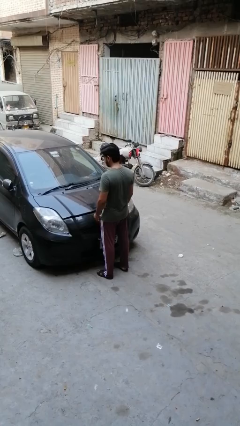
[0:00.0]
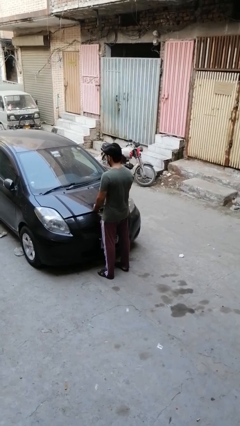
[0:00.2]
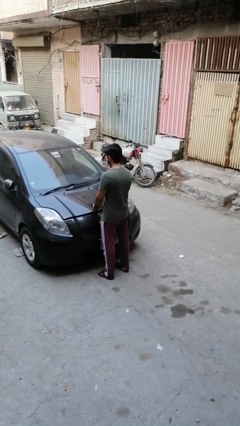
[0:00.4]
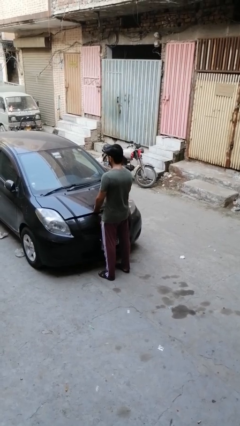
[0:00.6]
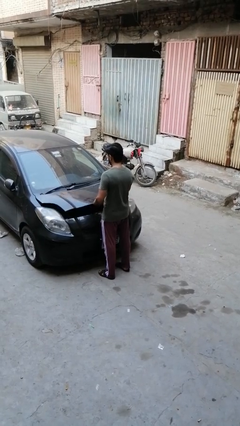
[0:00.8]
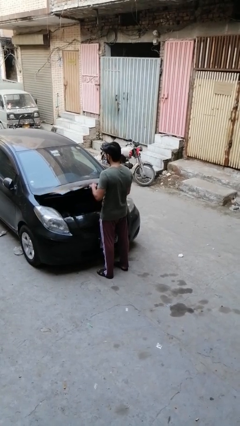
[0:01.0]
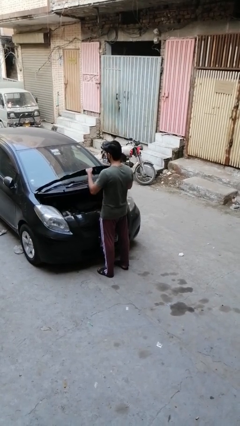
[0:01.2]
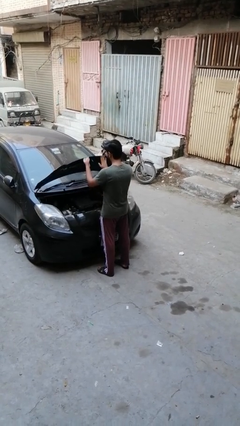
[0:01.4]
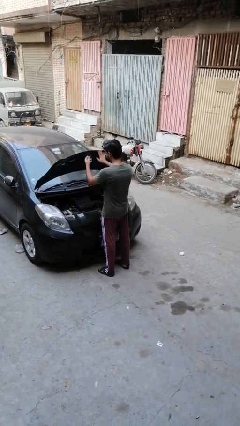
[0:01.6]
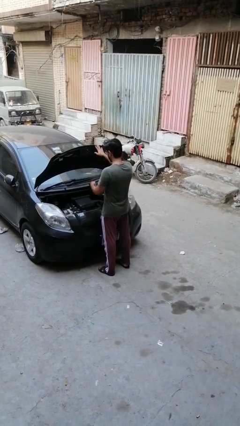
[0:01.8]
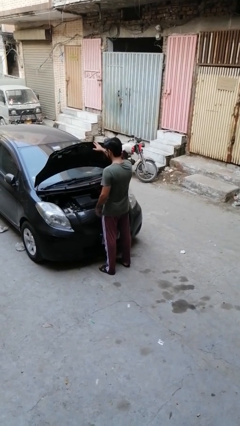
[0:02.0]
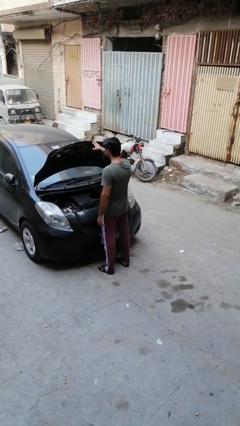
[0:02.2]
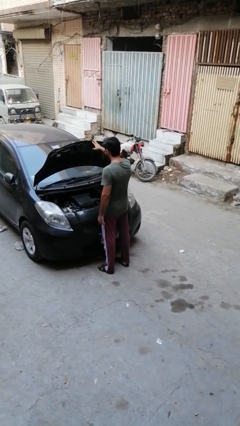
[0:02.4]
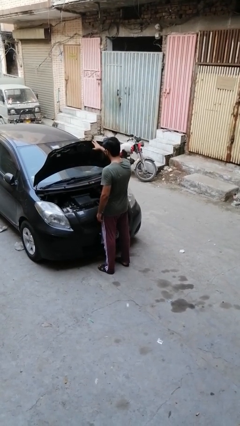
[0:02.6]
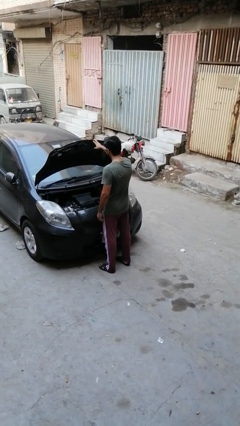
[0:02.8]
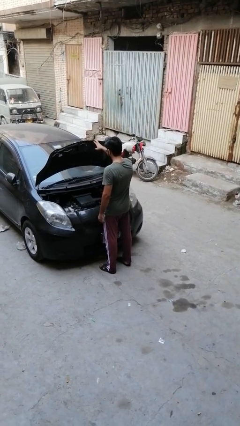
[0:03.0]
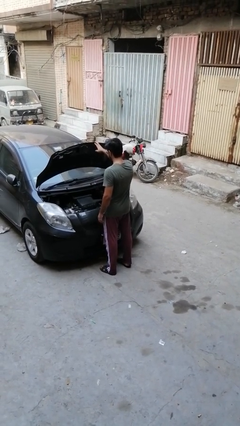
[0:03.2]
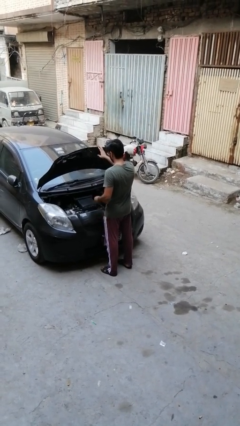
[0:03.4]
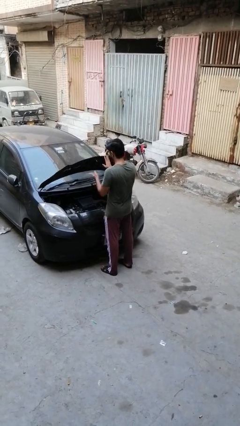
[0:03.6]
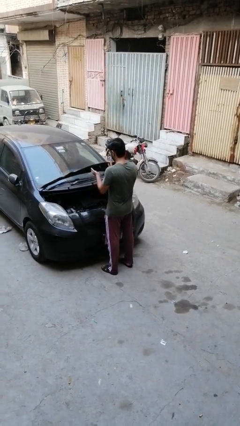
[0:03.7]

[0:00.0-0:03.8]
person opens car hood

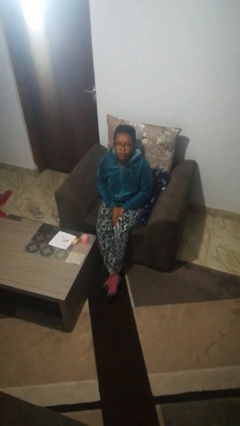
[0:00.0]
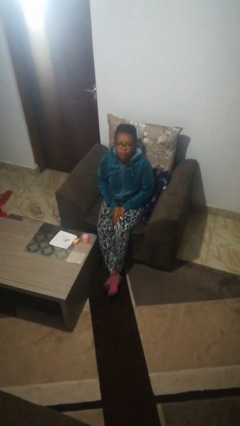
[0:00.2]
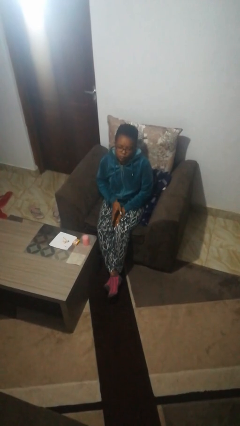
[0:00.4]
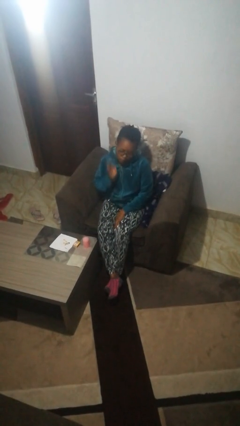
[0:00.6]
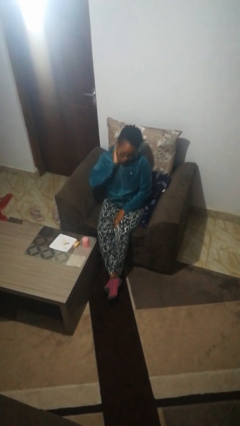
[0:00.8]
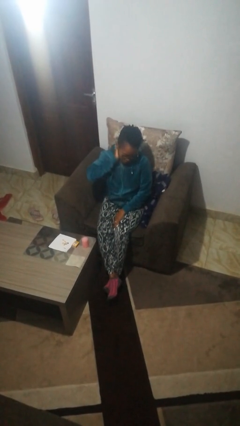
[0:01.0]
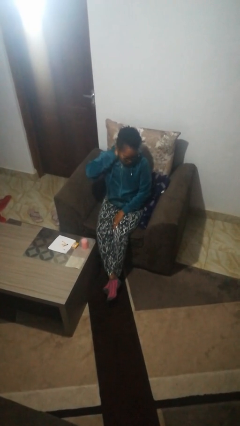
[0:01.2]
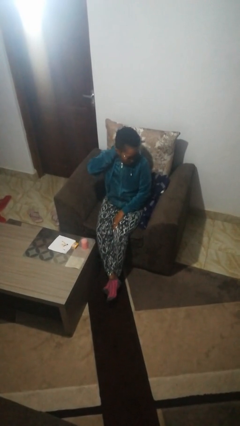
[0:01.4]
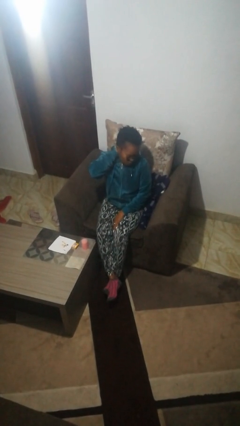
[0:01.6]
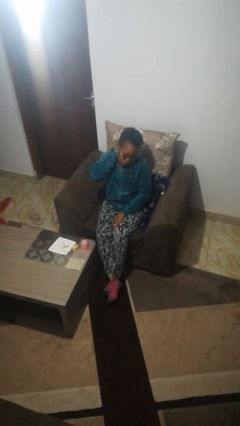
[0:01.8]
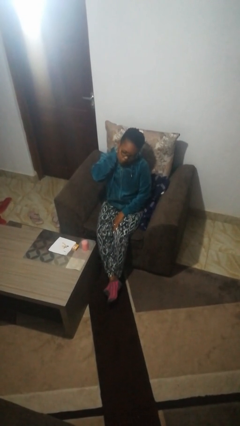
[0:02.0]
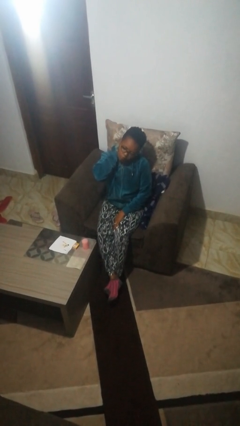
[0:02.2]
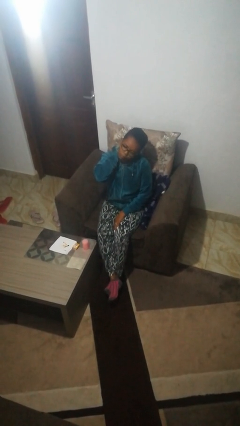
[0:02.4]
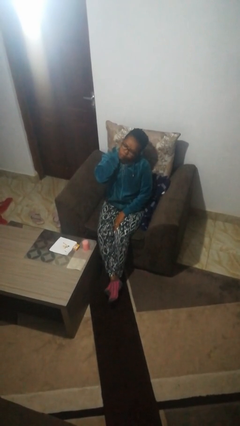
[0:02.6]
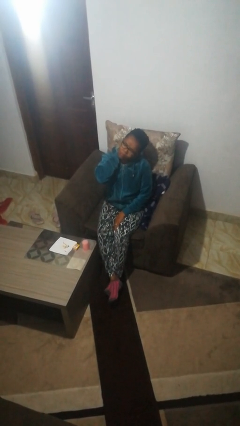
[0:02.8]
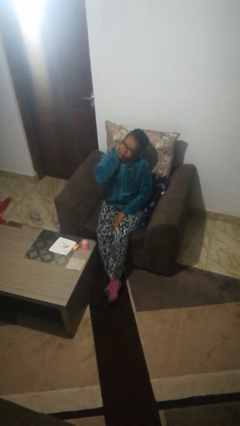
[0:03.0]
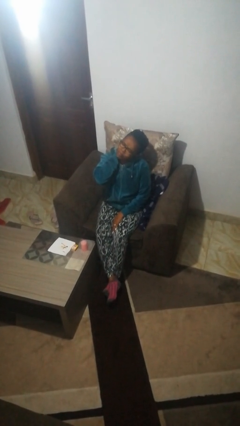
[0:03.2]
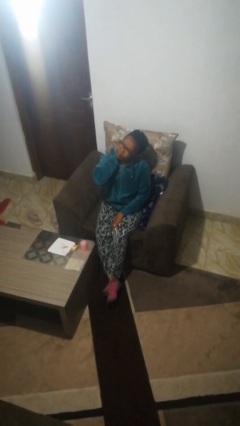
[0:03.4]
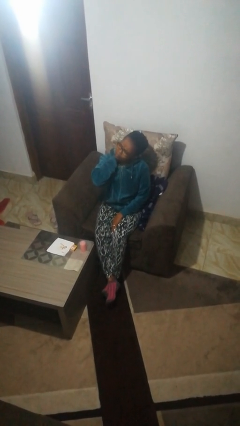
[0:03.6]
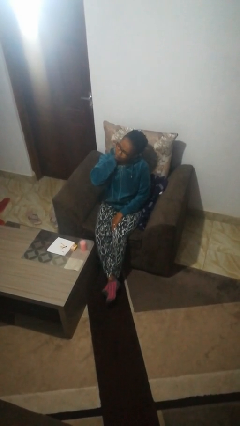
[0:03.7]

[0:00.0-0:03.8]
person rubs neck

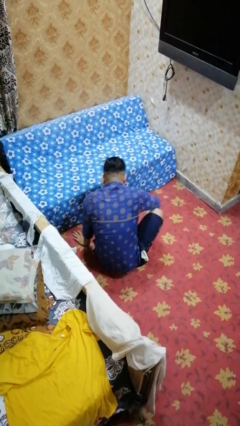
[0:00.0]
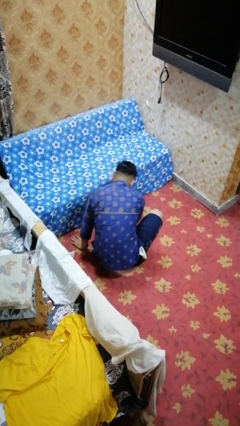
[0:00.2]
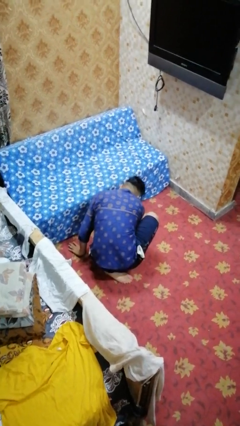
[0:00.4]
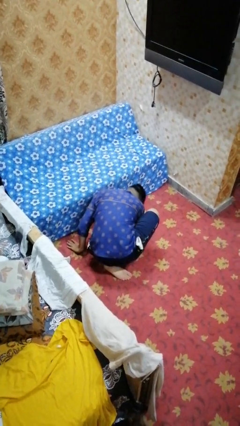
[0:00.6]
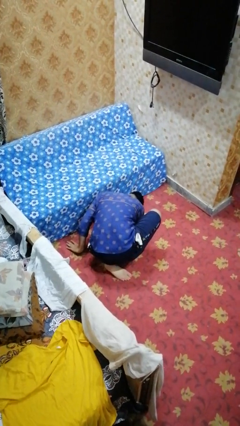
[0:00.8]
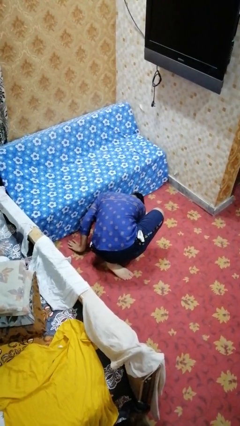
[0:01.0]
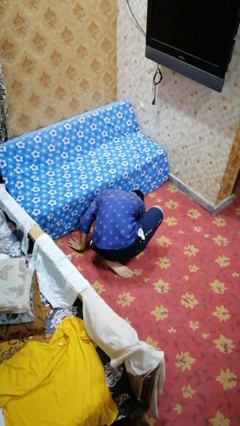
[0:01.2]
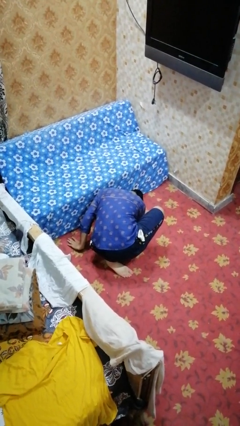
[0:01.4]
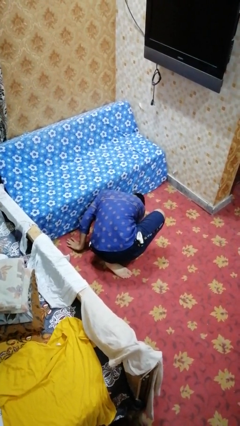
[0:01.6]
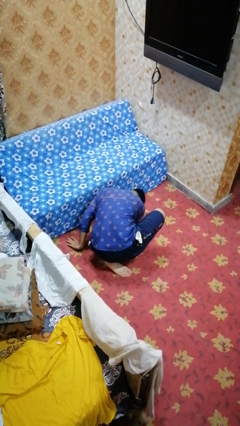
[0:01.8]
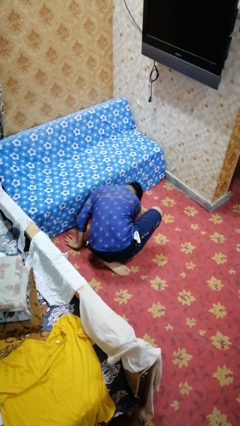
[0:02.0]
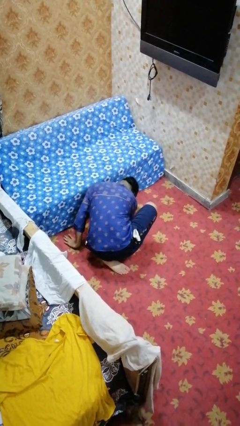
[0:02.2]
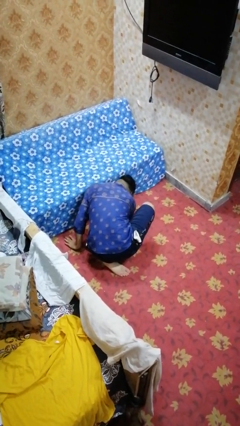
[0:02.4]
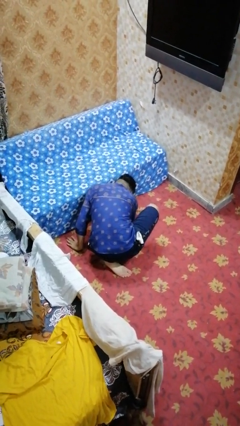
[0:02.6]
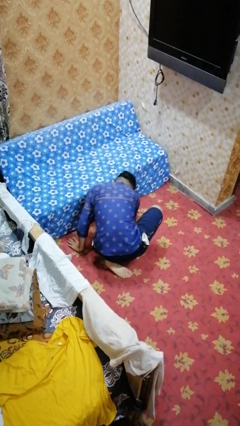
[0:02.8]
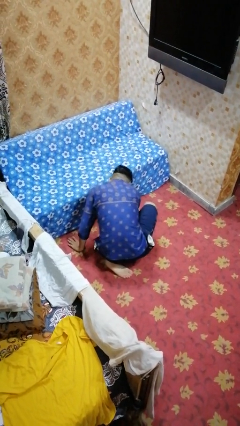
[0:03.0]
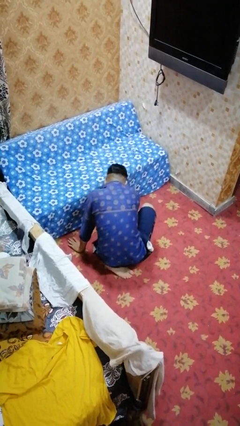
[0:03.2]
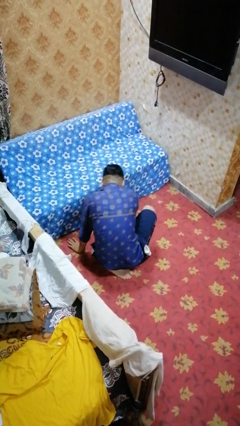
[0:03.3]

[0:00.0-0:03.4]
person searches under couch

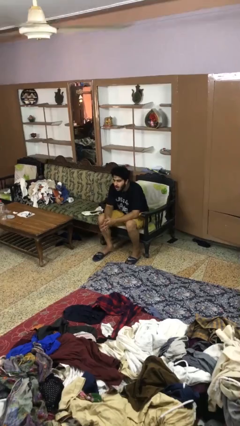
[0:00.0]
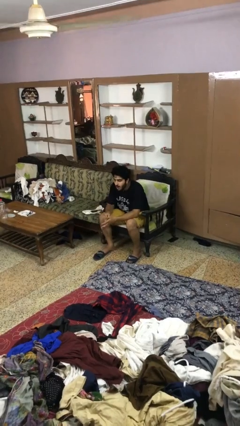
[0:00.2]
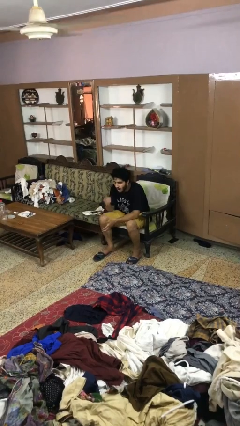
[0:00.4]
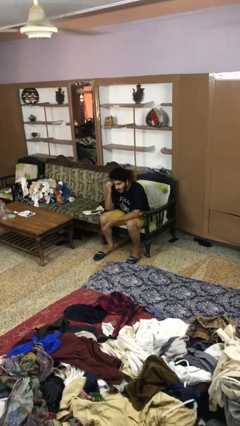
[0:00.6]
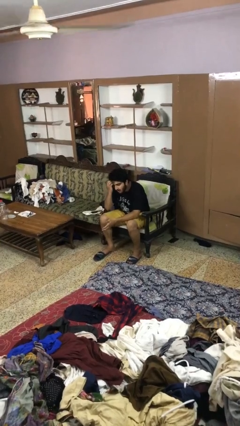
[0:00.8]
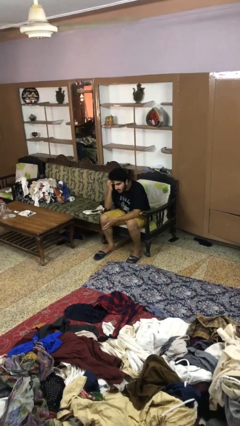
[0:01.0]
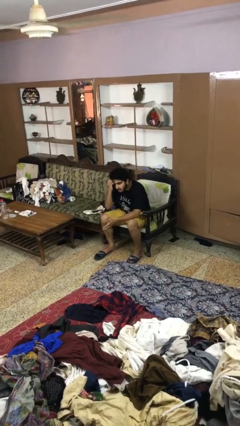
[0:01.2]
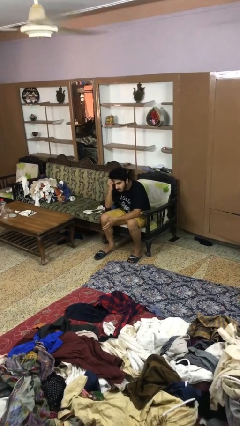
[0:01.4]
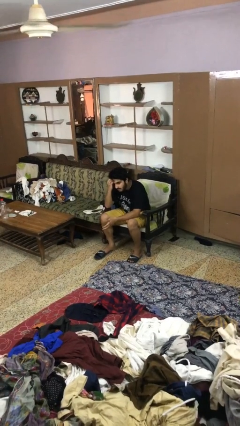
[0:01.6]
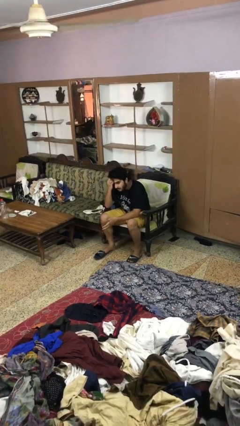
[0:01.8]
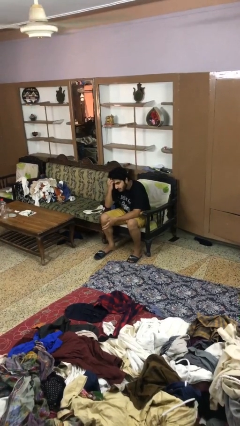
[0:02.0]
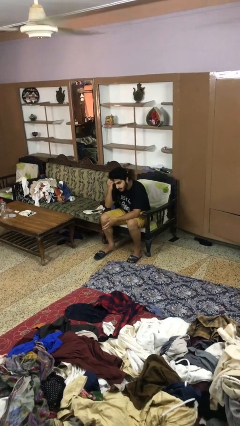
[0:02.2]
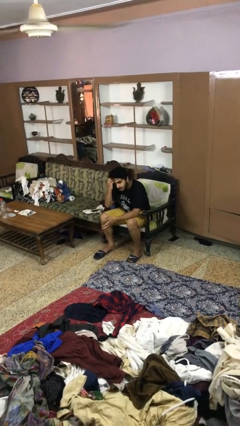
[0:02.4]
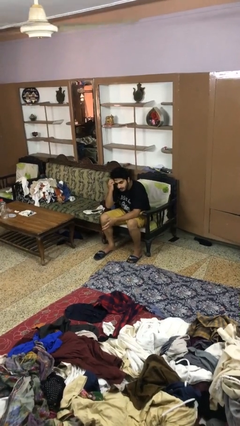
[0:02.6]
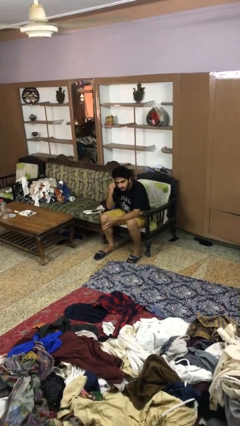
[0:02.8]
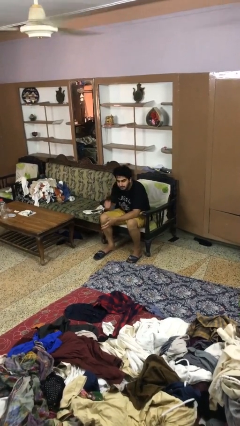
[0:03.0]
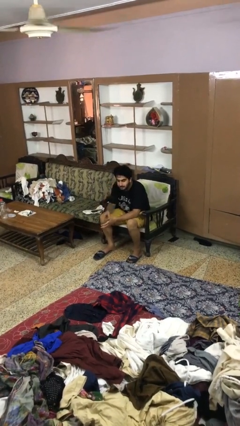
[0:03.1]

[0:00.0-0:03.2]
person scratches face

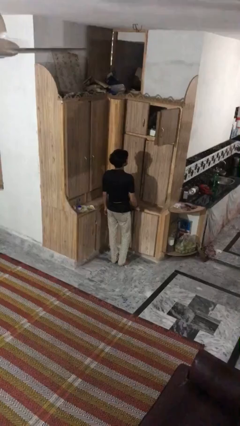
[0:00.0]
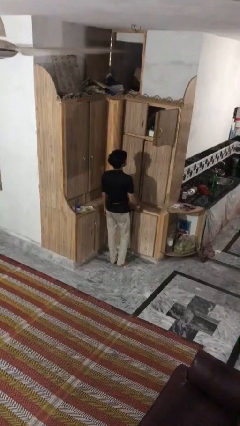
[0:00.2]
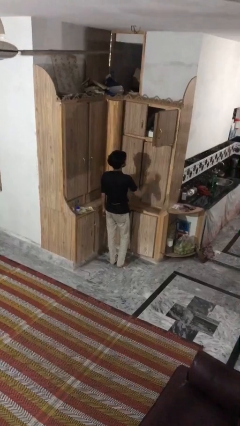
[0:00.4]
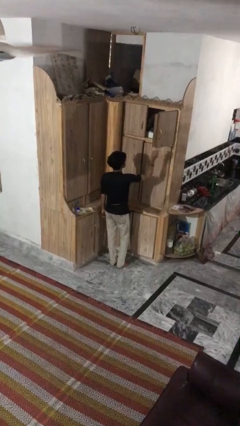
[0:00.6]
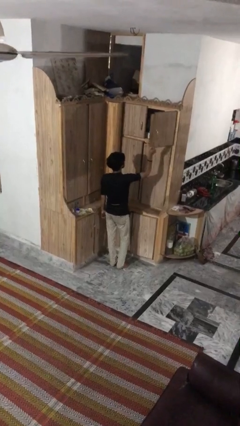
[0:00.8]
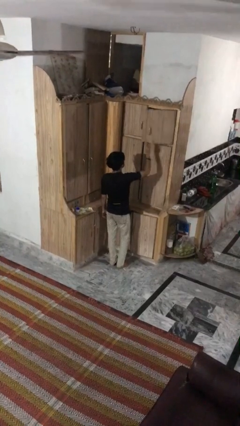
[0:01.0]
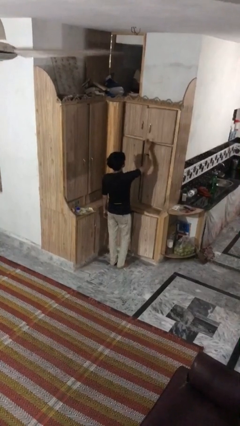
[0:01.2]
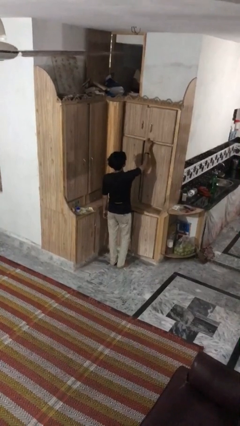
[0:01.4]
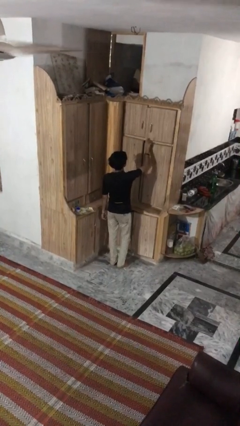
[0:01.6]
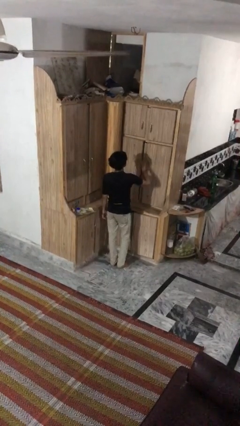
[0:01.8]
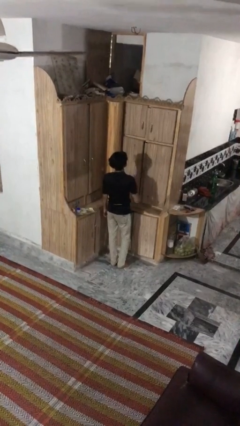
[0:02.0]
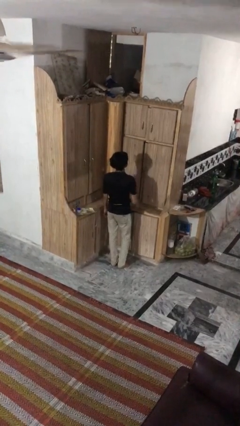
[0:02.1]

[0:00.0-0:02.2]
person closes cabinet

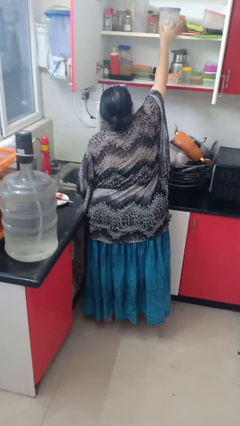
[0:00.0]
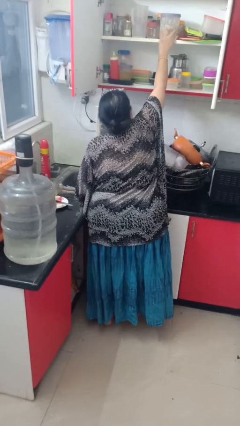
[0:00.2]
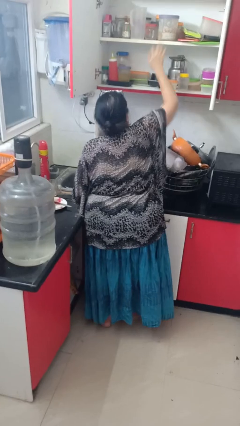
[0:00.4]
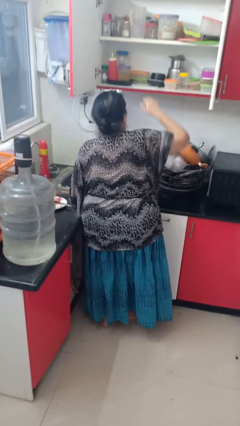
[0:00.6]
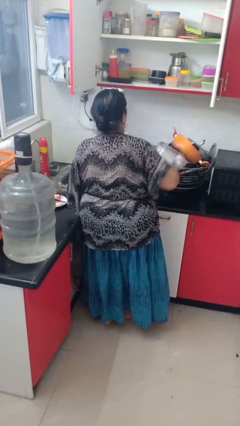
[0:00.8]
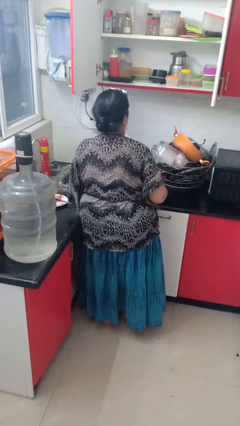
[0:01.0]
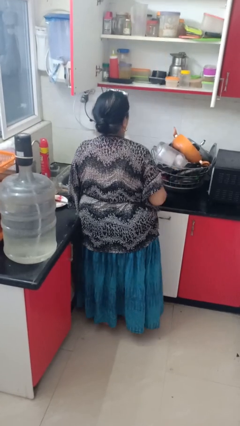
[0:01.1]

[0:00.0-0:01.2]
person takes object from cabinet
